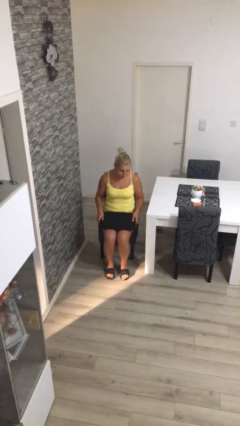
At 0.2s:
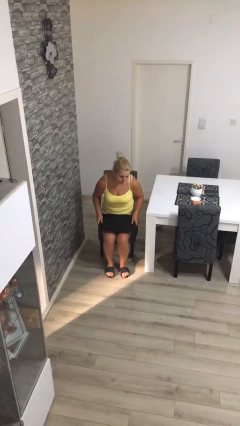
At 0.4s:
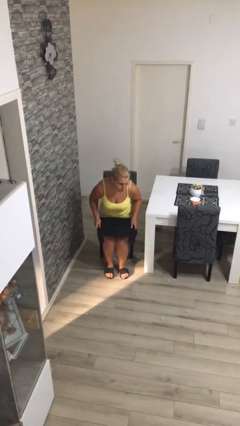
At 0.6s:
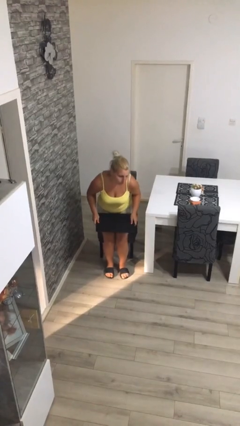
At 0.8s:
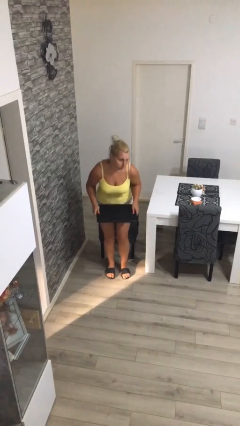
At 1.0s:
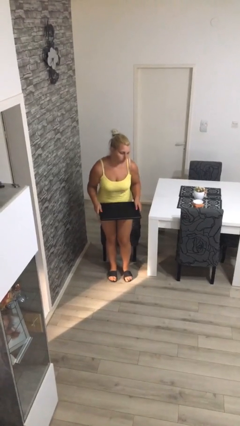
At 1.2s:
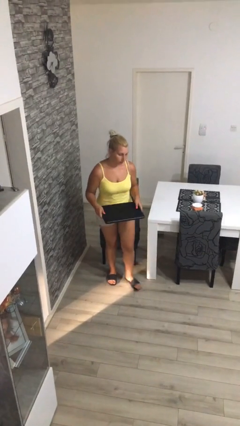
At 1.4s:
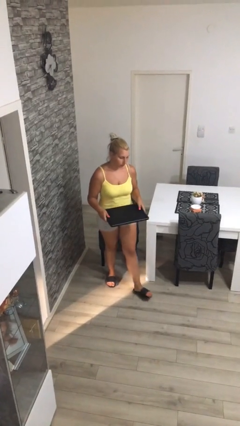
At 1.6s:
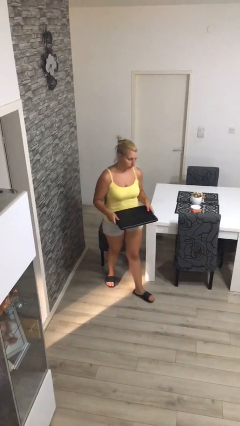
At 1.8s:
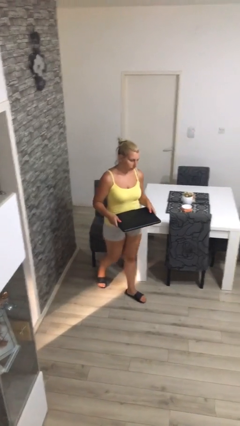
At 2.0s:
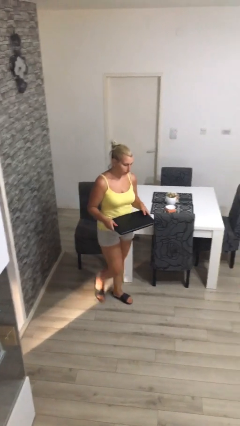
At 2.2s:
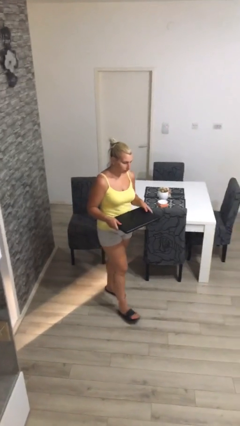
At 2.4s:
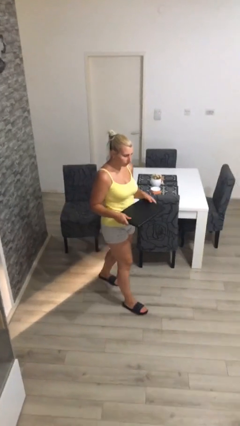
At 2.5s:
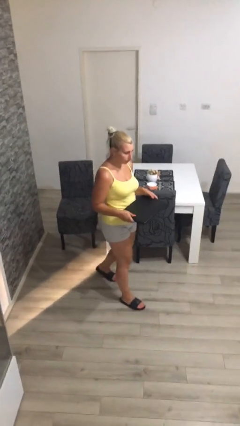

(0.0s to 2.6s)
person stands up

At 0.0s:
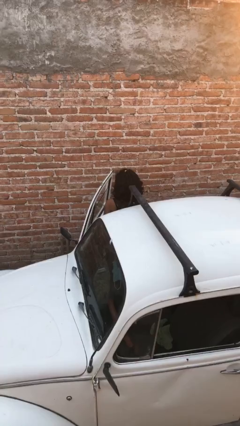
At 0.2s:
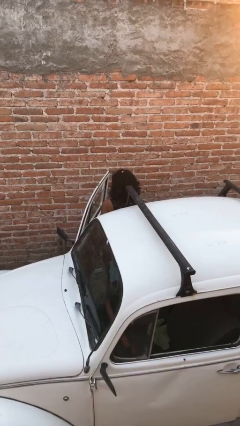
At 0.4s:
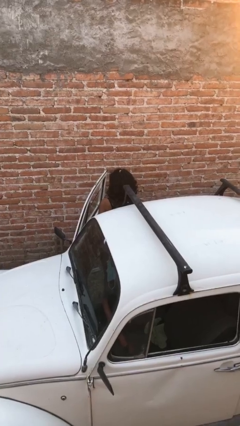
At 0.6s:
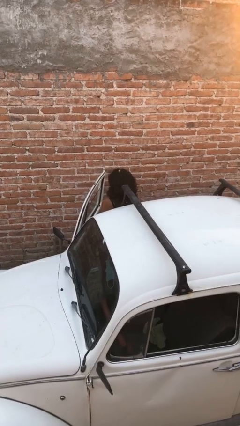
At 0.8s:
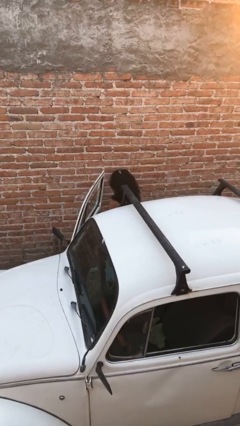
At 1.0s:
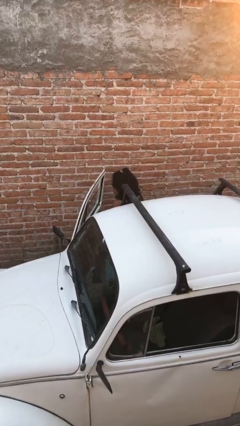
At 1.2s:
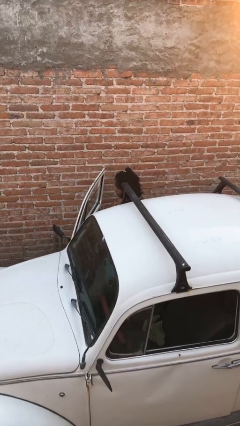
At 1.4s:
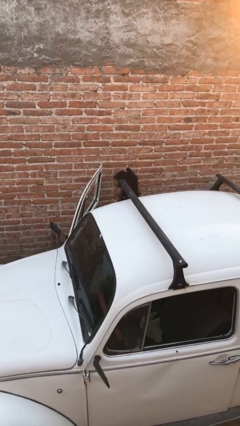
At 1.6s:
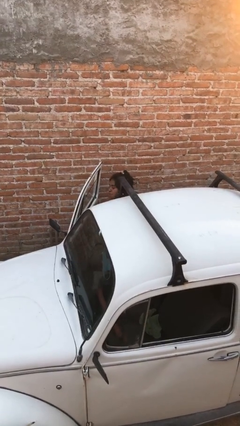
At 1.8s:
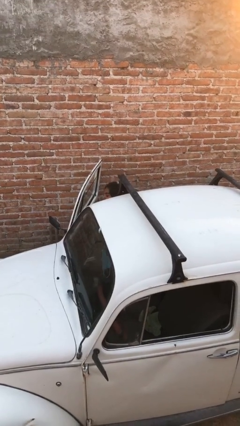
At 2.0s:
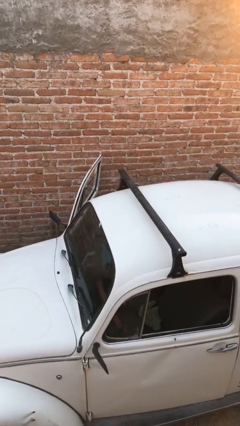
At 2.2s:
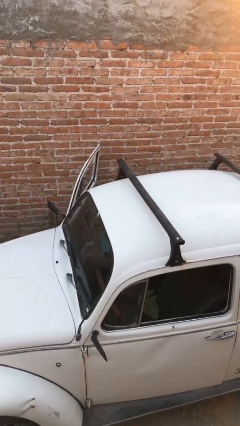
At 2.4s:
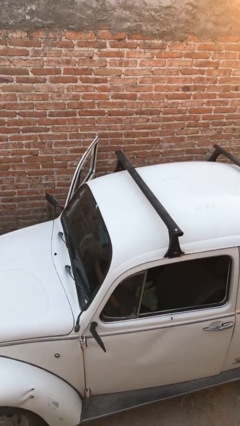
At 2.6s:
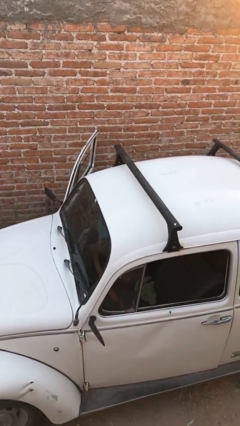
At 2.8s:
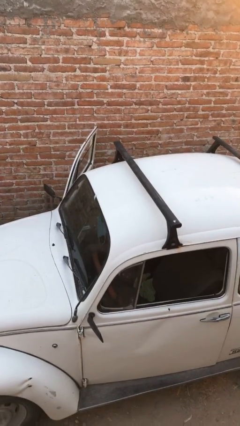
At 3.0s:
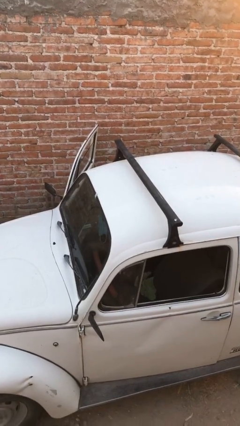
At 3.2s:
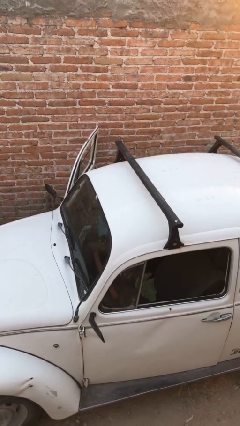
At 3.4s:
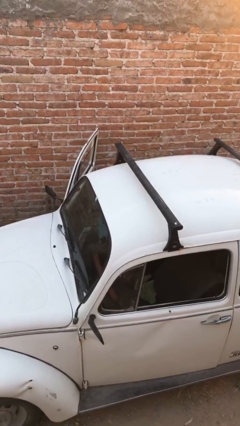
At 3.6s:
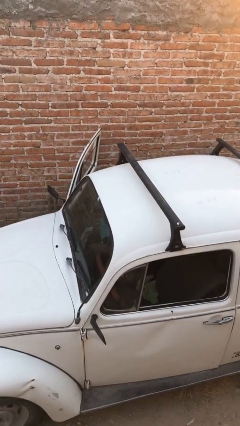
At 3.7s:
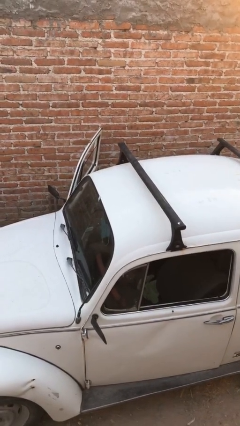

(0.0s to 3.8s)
person enters car

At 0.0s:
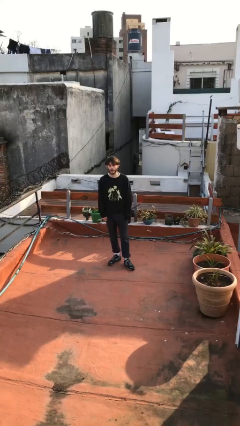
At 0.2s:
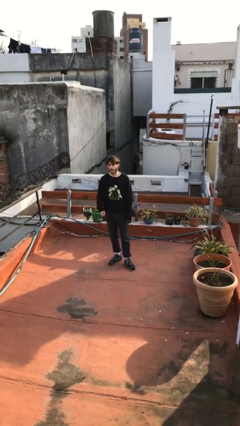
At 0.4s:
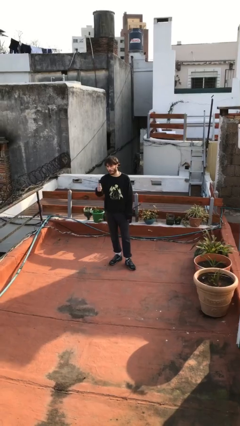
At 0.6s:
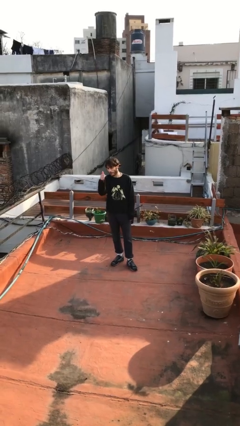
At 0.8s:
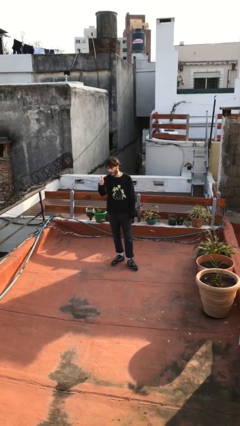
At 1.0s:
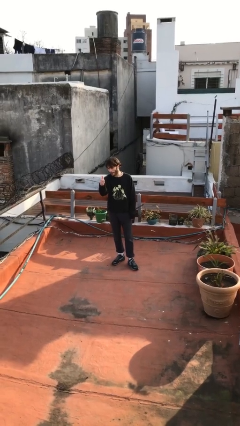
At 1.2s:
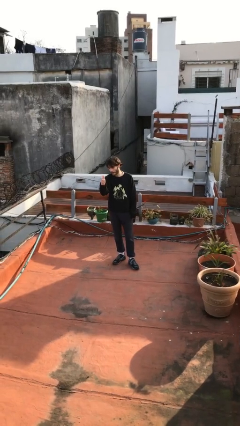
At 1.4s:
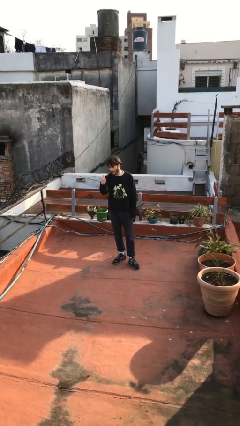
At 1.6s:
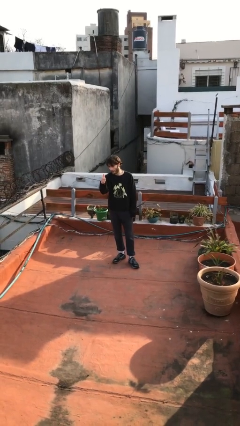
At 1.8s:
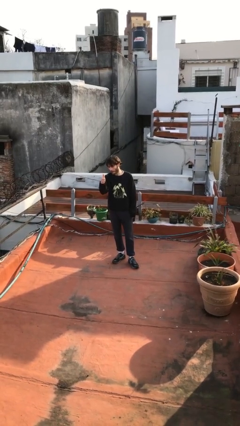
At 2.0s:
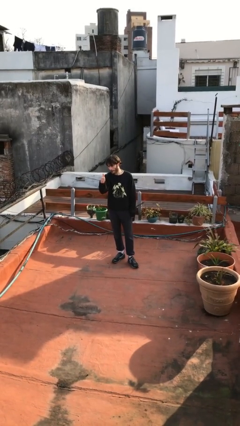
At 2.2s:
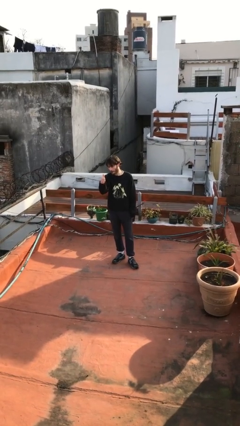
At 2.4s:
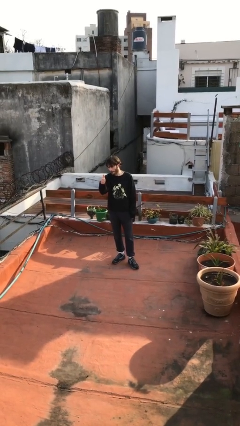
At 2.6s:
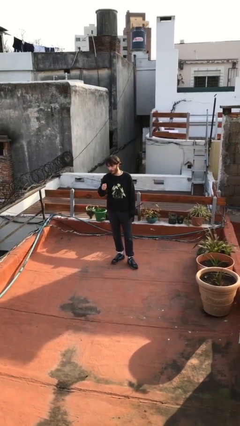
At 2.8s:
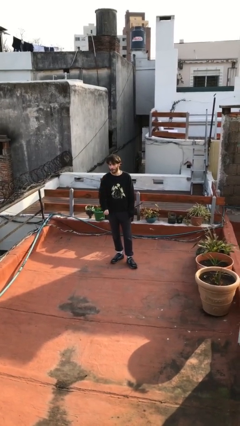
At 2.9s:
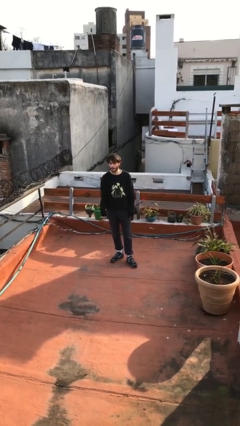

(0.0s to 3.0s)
person gestures thumbs up

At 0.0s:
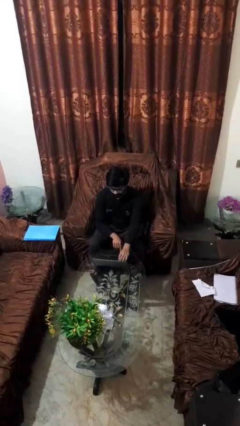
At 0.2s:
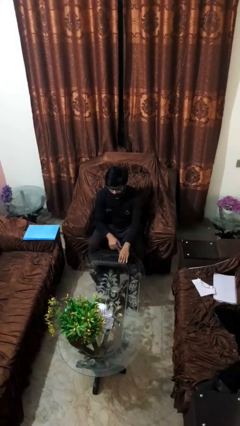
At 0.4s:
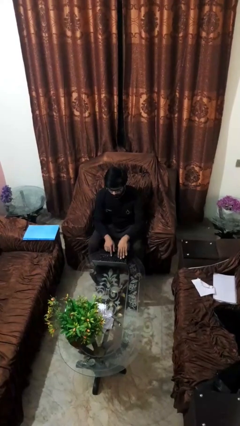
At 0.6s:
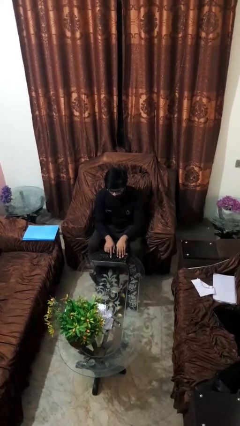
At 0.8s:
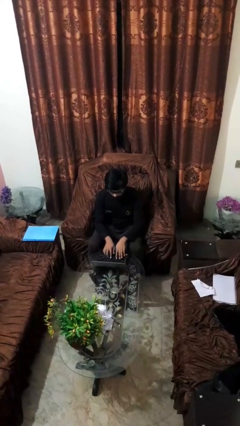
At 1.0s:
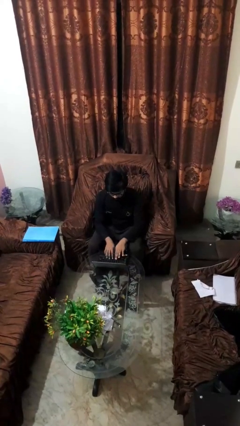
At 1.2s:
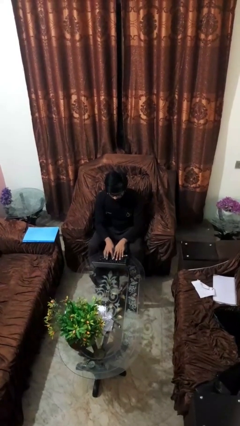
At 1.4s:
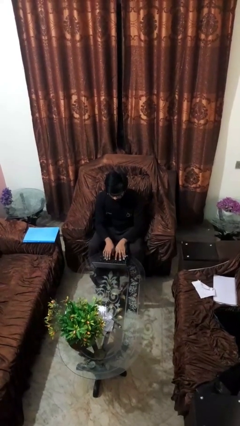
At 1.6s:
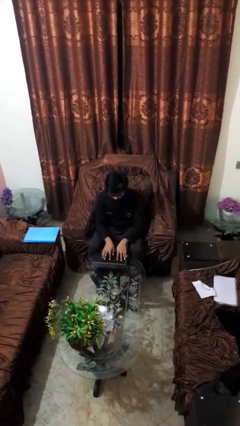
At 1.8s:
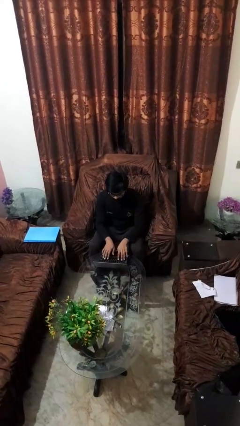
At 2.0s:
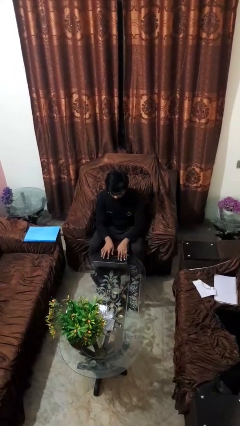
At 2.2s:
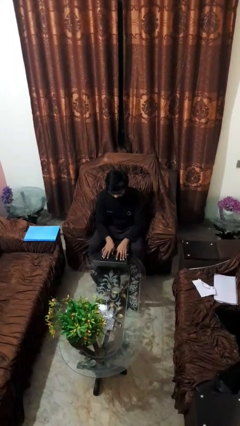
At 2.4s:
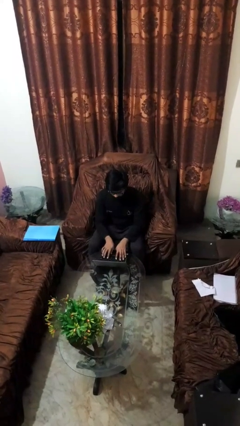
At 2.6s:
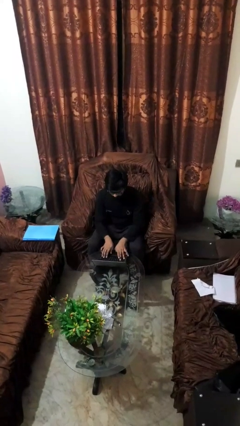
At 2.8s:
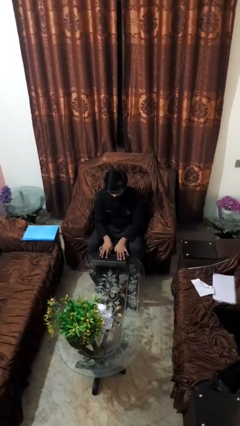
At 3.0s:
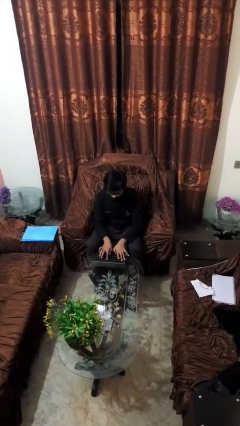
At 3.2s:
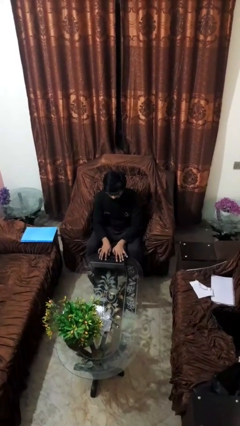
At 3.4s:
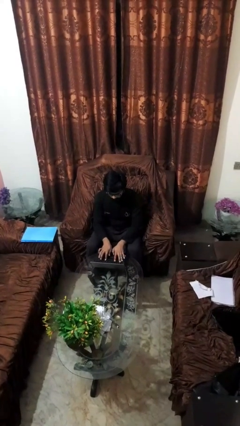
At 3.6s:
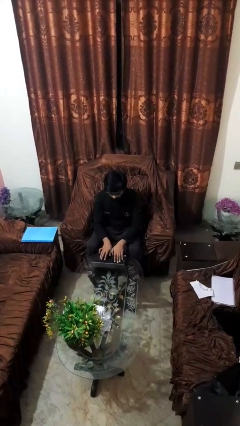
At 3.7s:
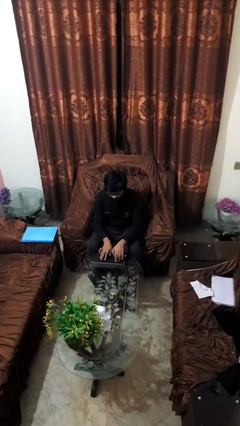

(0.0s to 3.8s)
person interacts with laptop

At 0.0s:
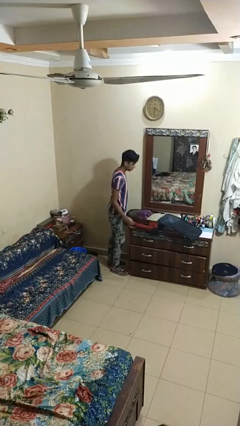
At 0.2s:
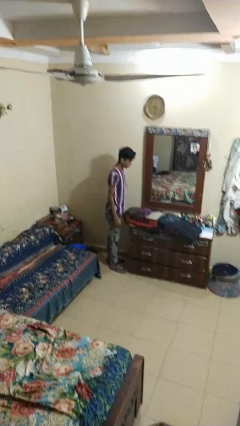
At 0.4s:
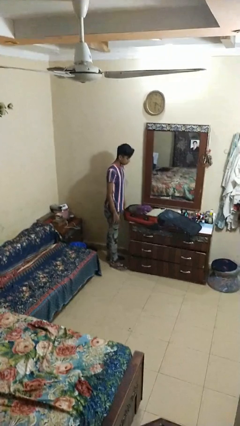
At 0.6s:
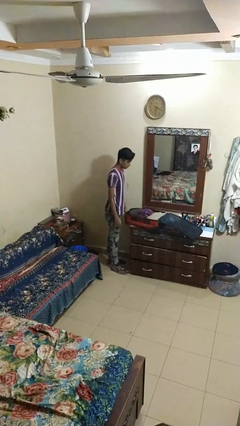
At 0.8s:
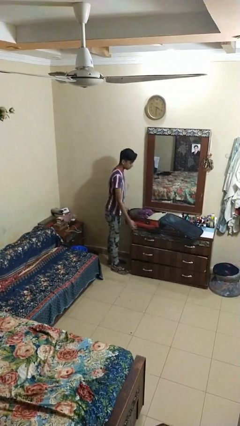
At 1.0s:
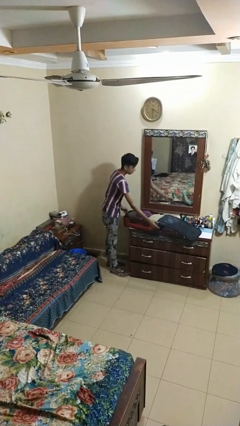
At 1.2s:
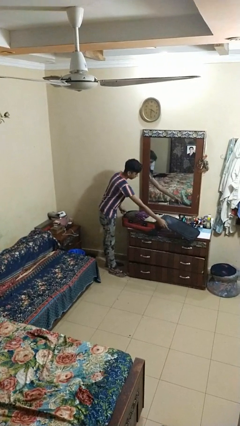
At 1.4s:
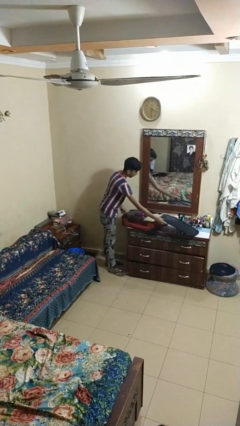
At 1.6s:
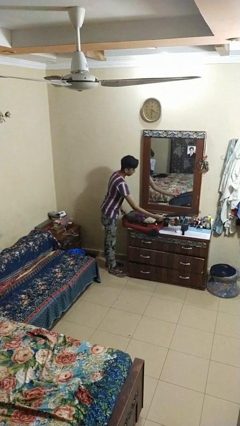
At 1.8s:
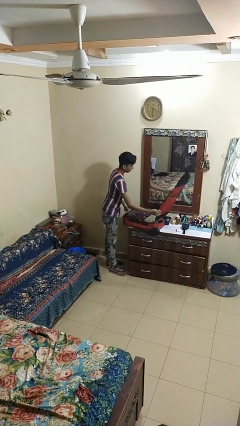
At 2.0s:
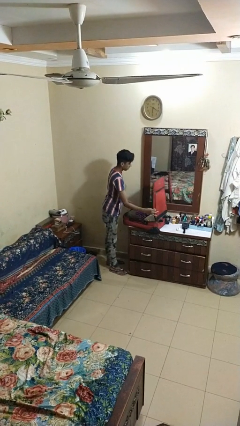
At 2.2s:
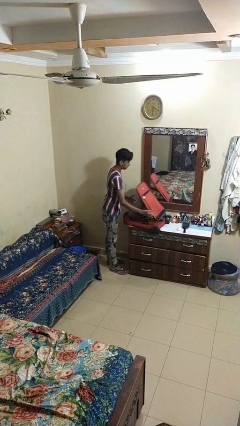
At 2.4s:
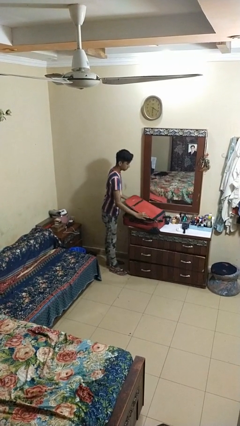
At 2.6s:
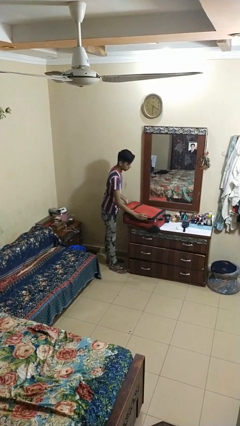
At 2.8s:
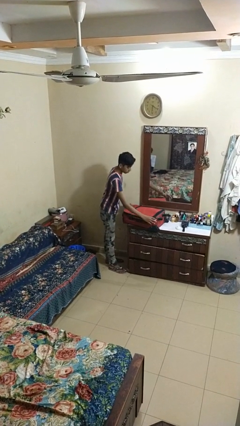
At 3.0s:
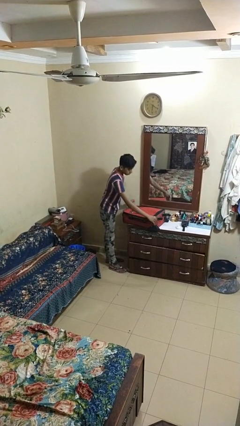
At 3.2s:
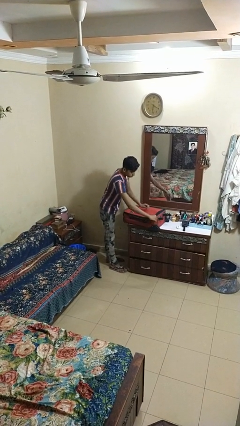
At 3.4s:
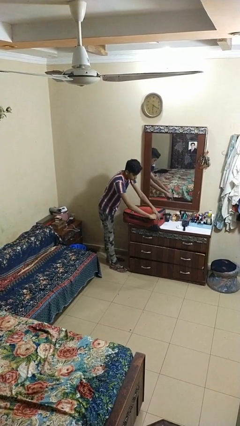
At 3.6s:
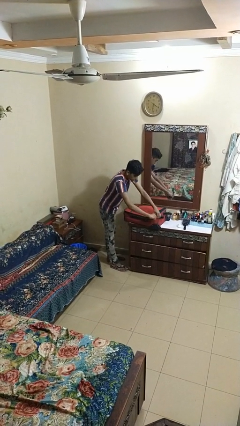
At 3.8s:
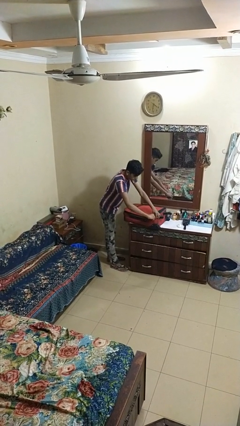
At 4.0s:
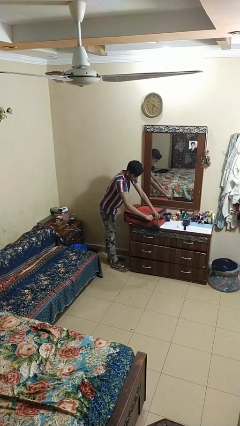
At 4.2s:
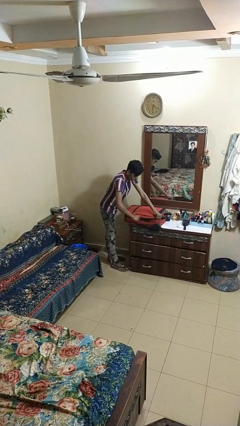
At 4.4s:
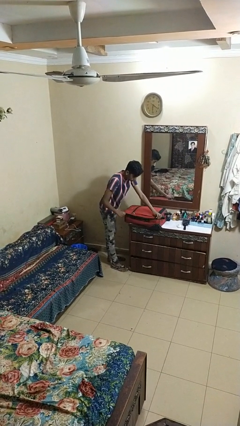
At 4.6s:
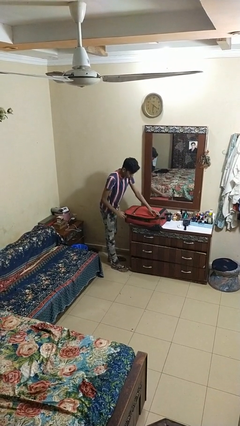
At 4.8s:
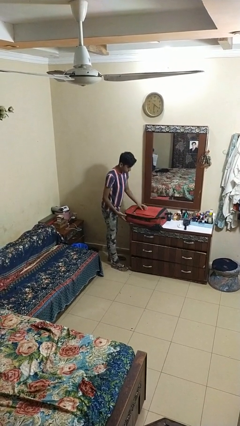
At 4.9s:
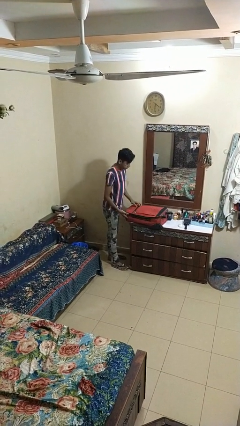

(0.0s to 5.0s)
person closes suitcase
